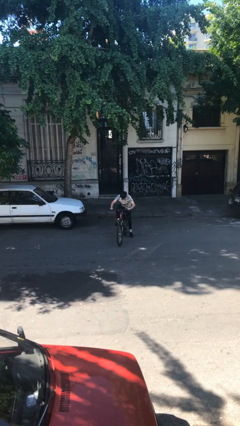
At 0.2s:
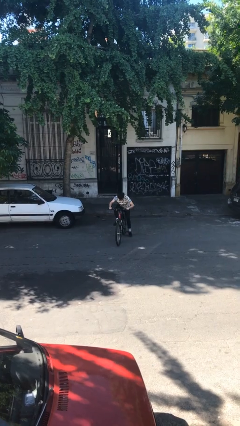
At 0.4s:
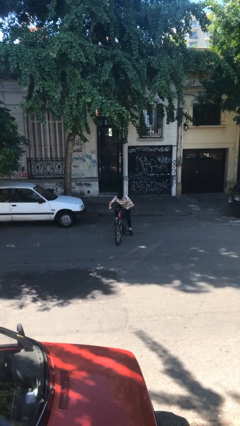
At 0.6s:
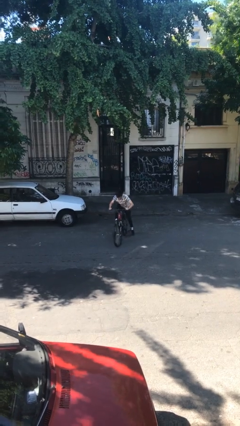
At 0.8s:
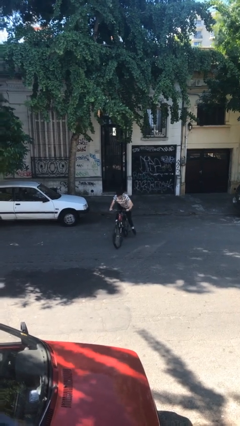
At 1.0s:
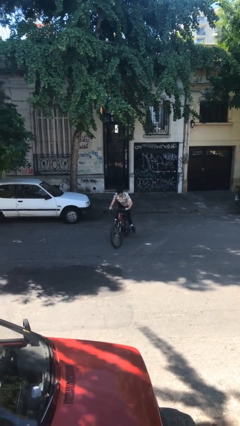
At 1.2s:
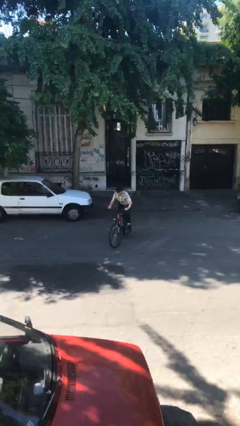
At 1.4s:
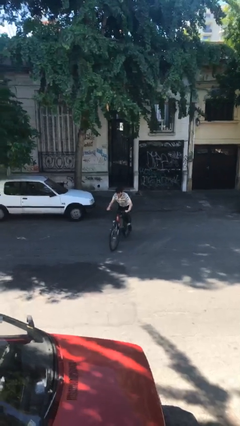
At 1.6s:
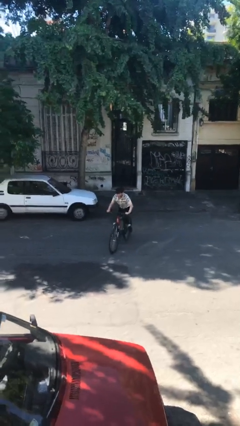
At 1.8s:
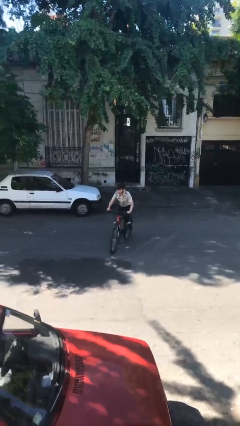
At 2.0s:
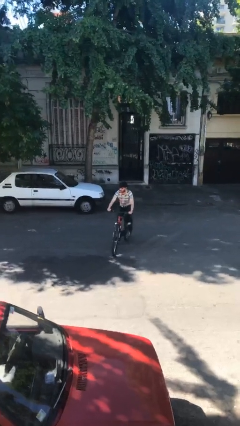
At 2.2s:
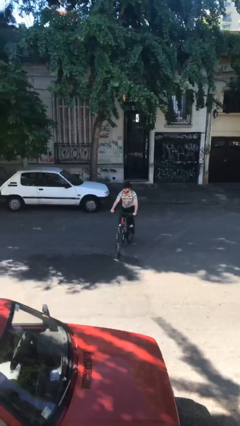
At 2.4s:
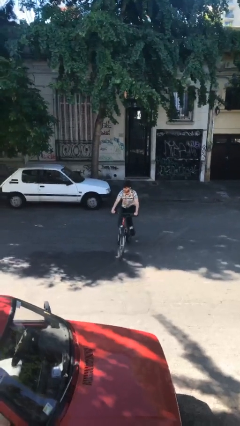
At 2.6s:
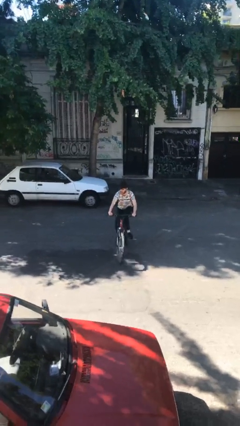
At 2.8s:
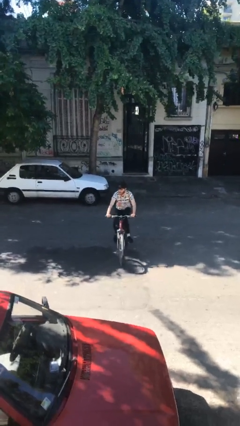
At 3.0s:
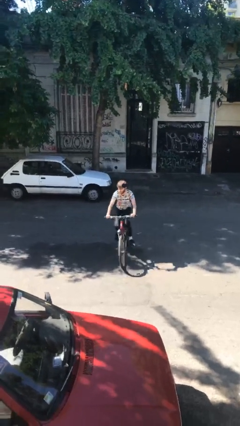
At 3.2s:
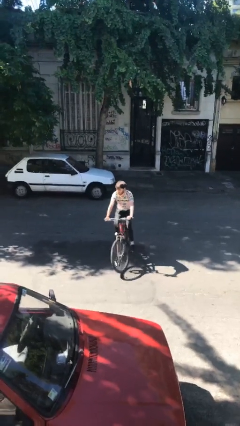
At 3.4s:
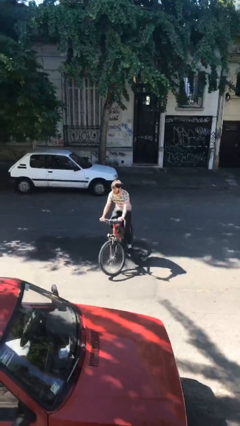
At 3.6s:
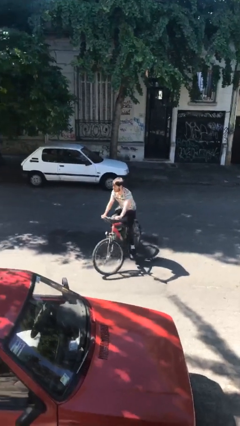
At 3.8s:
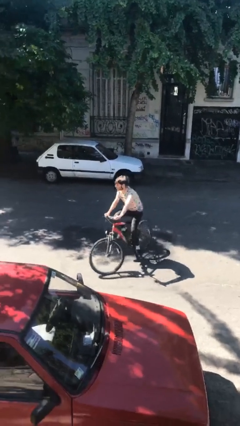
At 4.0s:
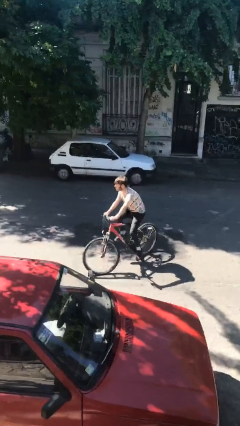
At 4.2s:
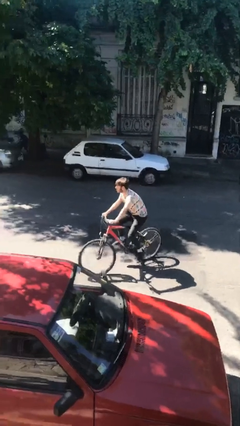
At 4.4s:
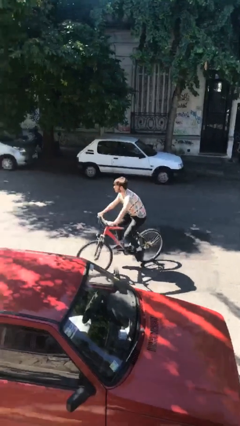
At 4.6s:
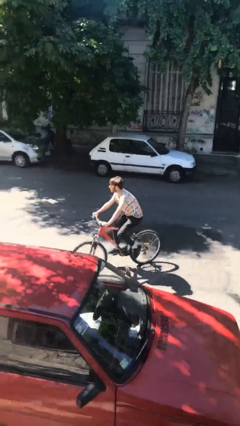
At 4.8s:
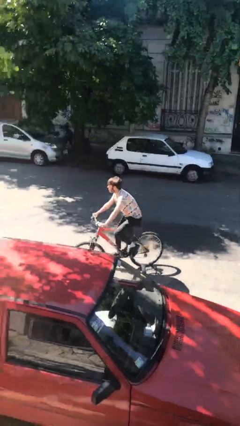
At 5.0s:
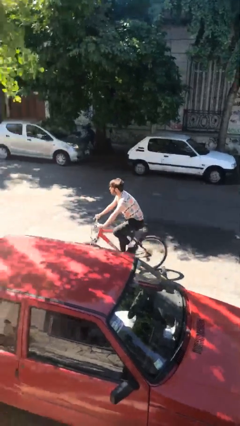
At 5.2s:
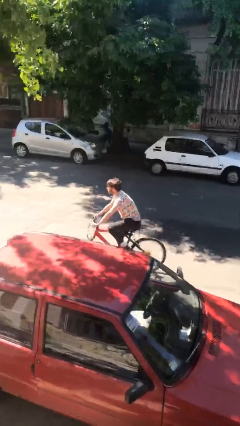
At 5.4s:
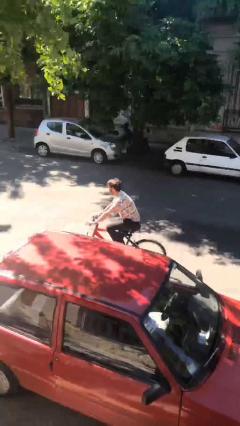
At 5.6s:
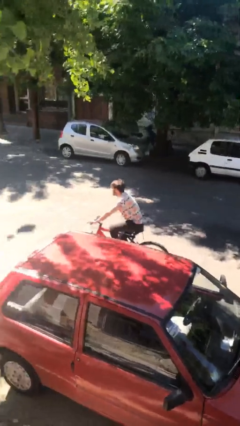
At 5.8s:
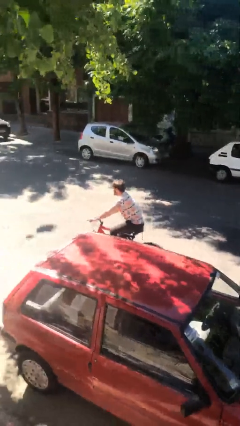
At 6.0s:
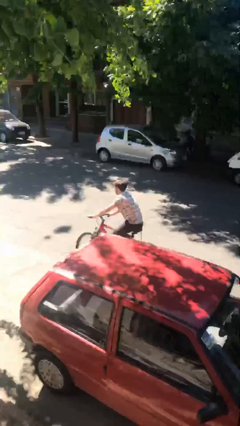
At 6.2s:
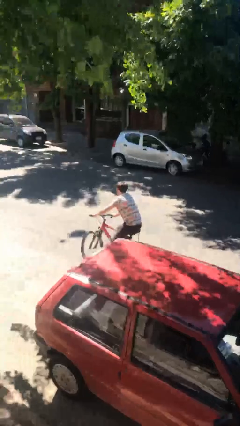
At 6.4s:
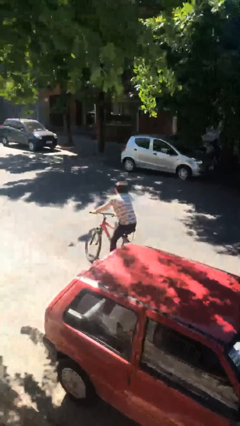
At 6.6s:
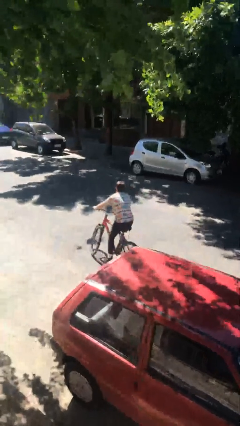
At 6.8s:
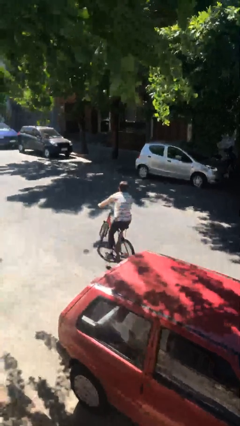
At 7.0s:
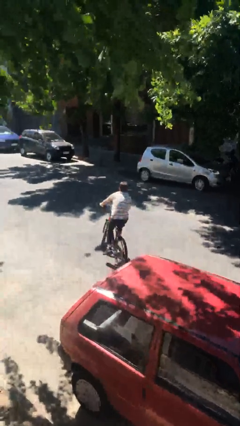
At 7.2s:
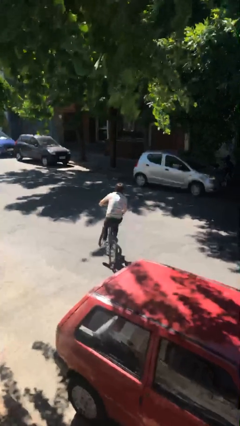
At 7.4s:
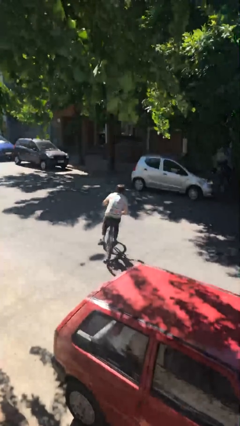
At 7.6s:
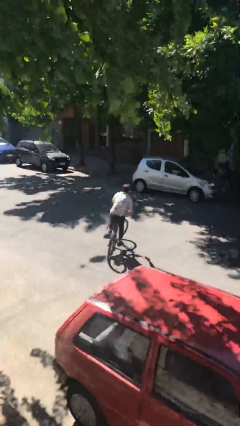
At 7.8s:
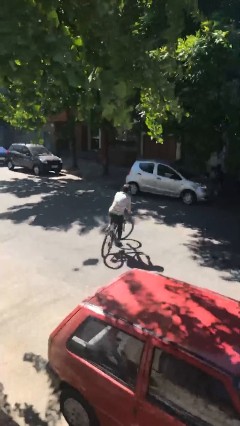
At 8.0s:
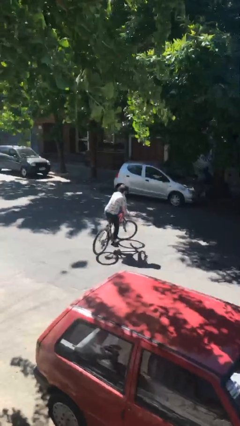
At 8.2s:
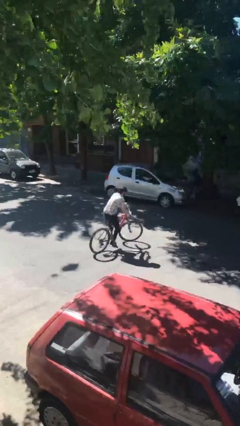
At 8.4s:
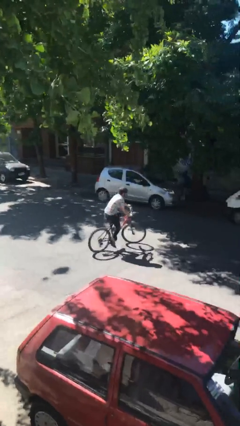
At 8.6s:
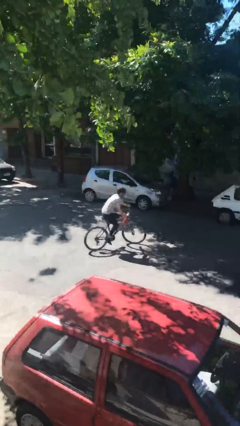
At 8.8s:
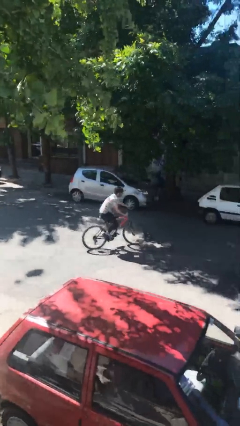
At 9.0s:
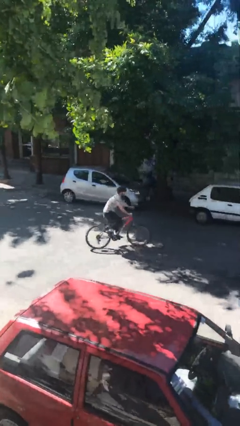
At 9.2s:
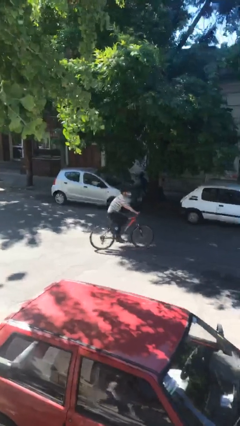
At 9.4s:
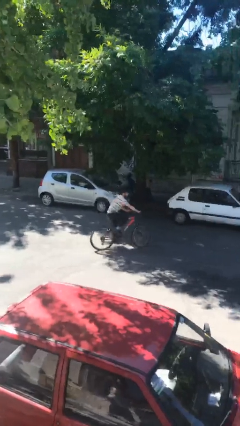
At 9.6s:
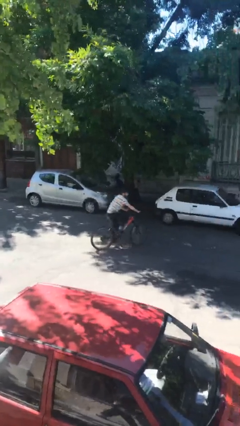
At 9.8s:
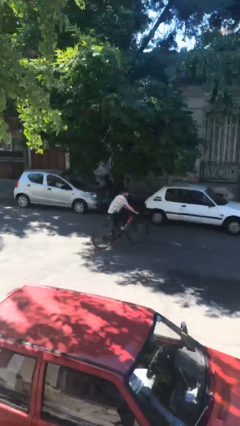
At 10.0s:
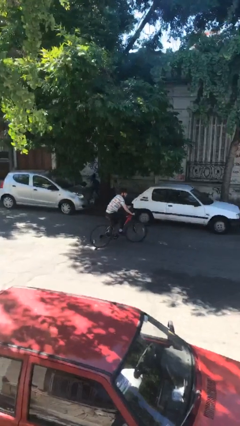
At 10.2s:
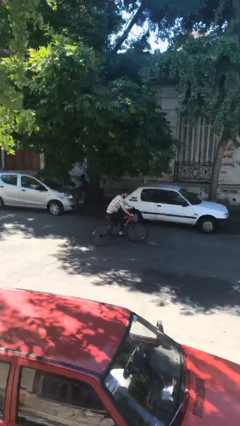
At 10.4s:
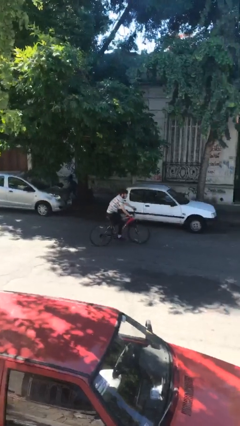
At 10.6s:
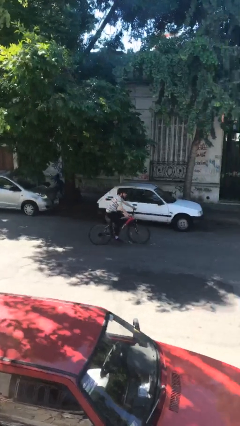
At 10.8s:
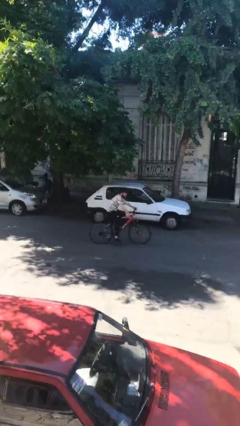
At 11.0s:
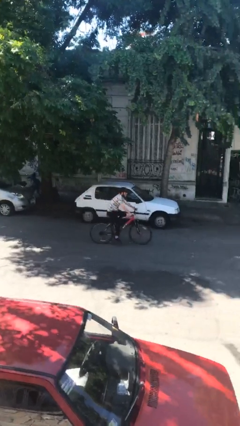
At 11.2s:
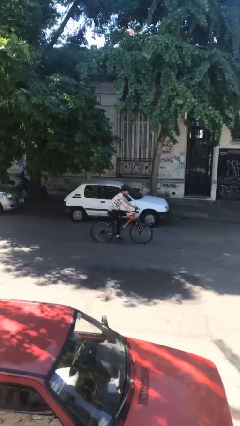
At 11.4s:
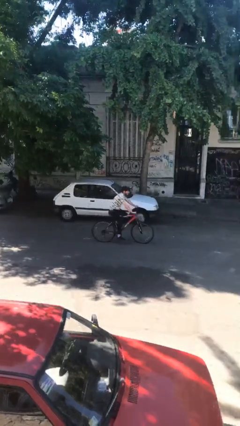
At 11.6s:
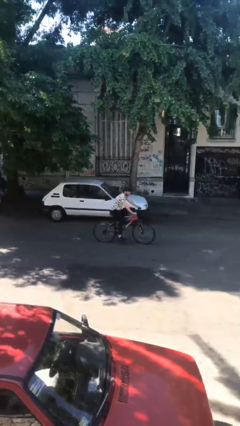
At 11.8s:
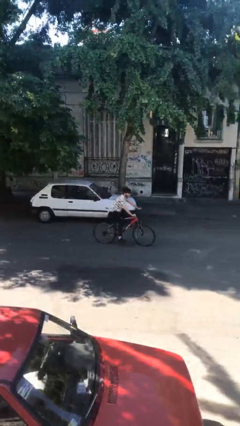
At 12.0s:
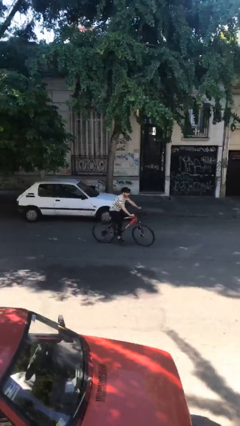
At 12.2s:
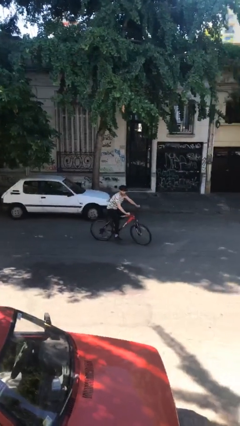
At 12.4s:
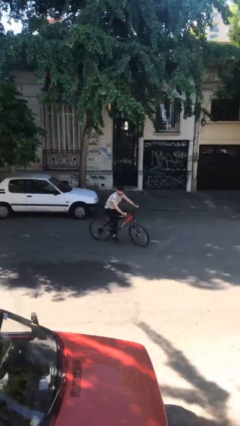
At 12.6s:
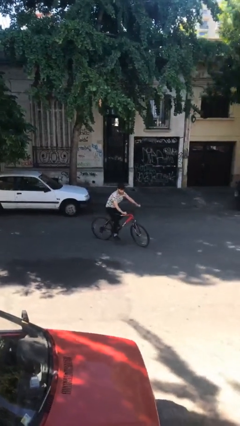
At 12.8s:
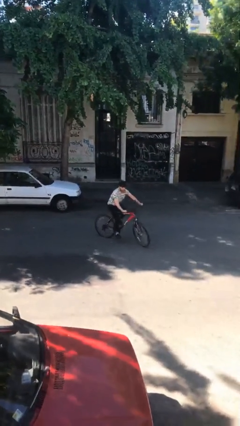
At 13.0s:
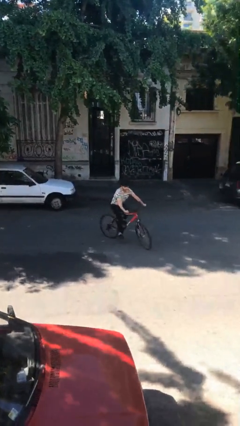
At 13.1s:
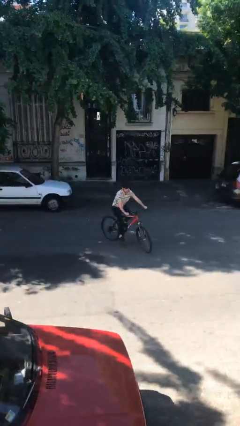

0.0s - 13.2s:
person rides bicycle

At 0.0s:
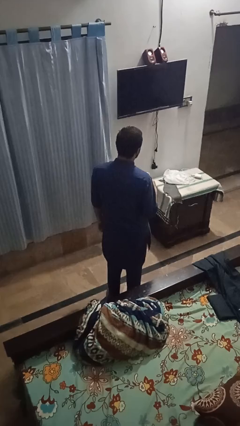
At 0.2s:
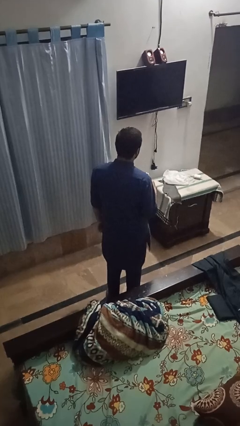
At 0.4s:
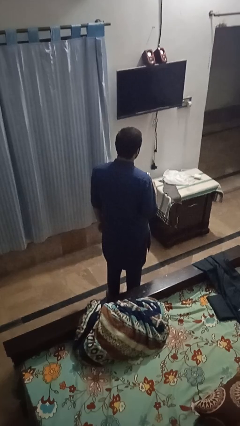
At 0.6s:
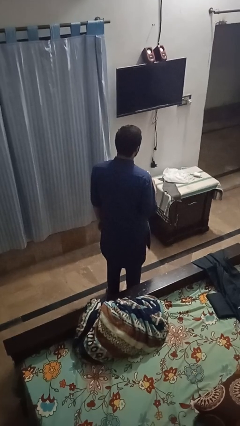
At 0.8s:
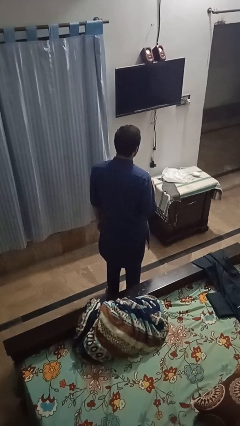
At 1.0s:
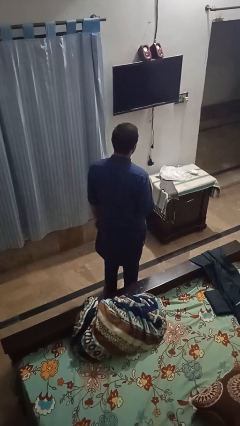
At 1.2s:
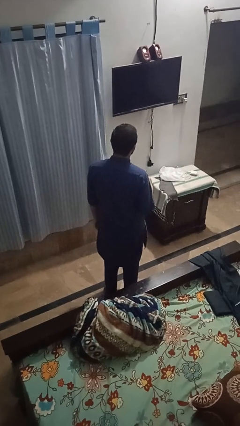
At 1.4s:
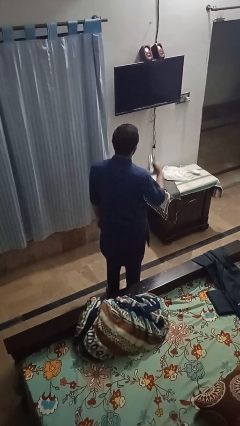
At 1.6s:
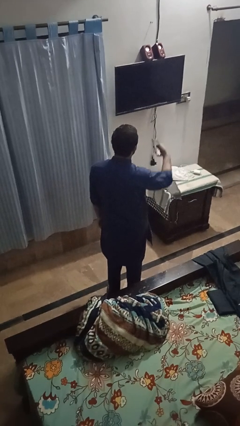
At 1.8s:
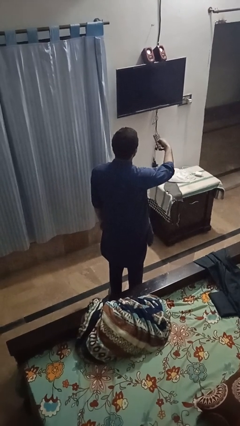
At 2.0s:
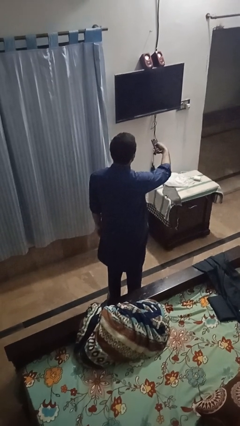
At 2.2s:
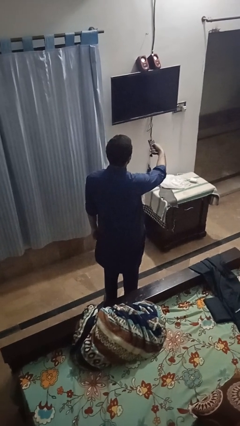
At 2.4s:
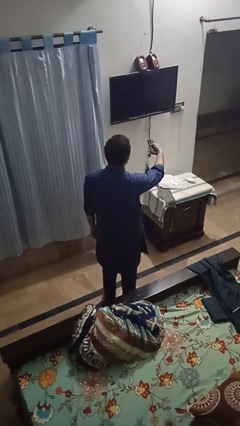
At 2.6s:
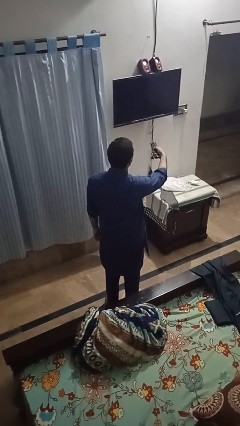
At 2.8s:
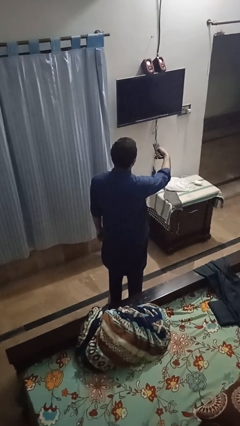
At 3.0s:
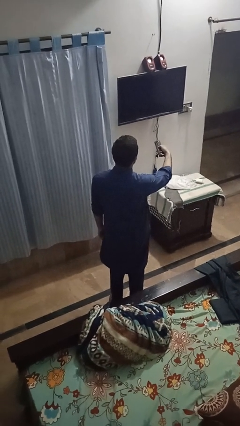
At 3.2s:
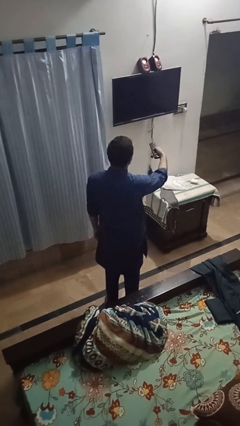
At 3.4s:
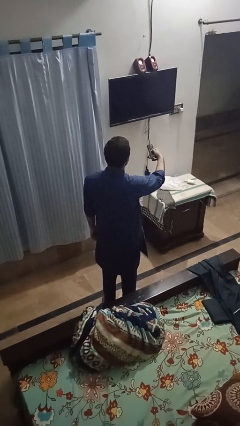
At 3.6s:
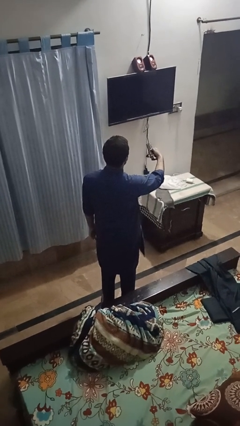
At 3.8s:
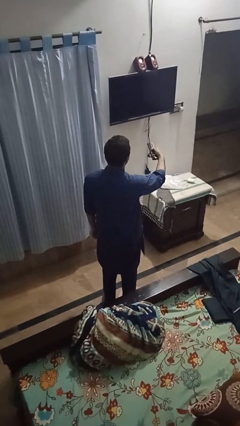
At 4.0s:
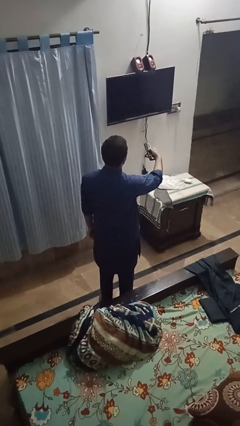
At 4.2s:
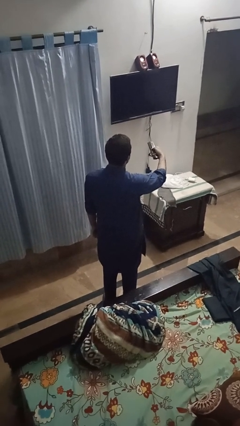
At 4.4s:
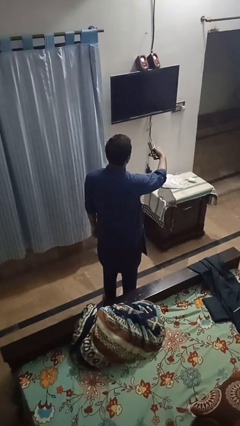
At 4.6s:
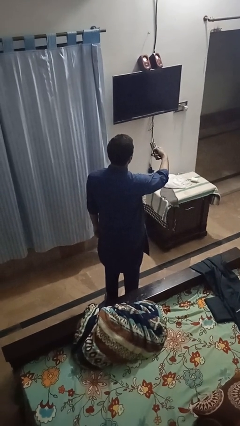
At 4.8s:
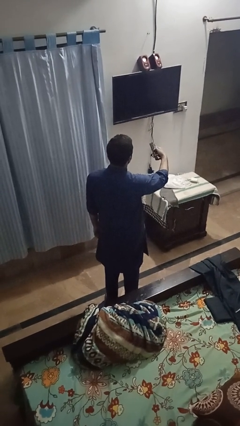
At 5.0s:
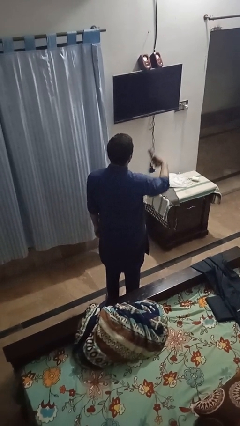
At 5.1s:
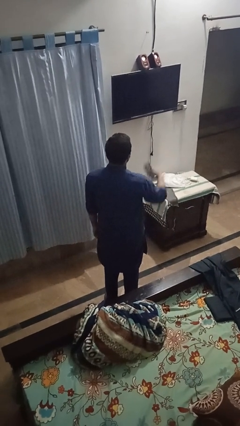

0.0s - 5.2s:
person uses television remote
